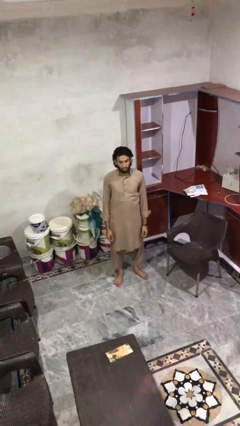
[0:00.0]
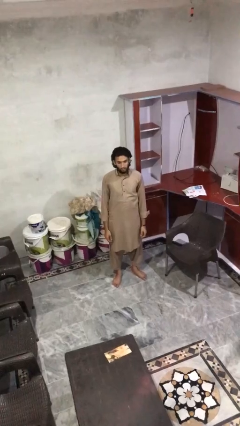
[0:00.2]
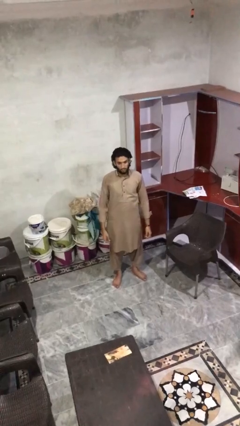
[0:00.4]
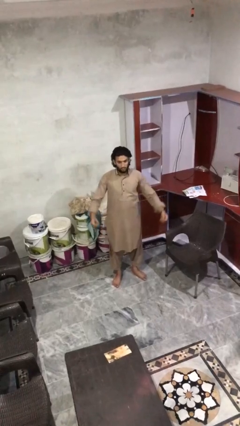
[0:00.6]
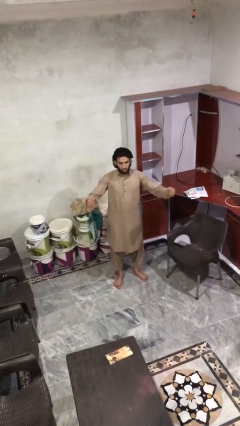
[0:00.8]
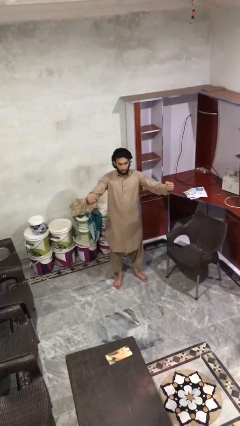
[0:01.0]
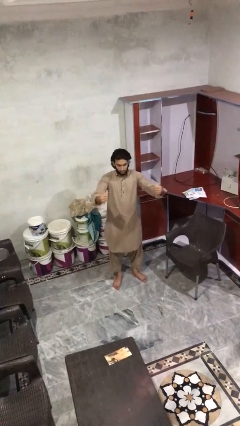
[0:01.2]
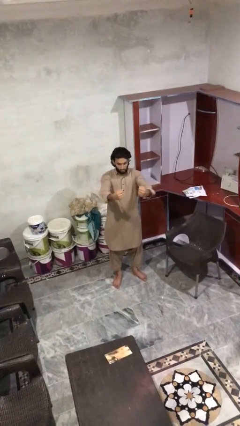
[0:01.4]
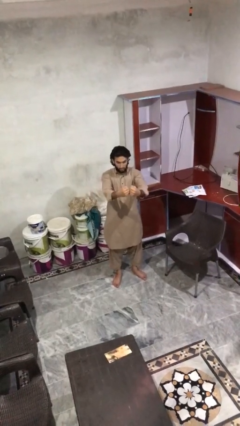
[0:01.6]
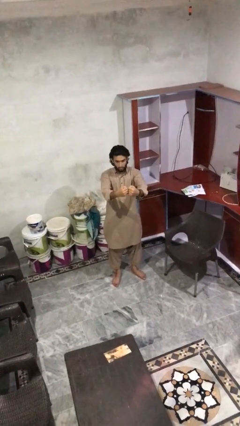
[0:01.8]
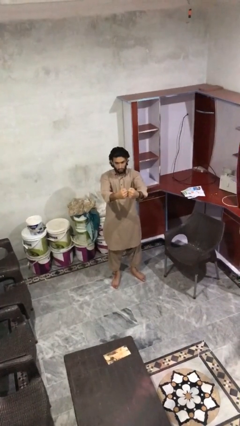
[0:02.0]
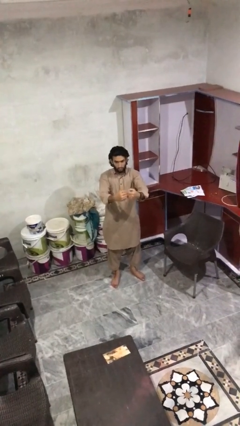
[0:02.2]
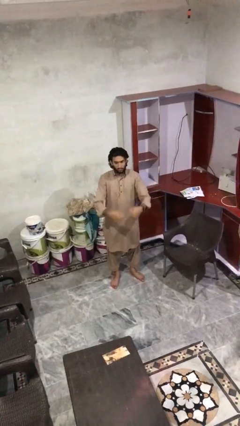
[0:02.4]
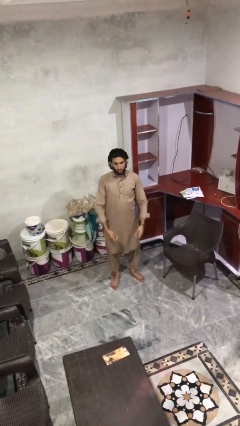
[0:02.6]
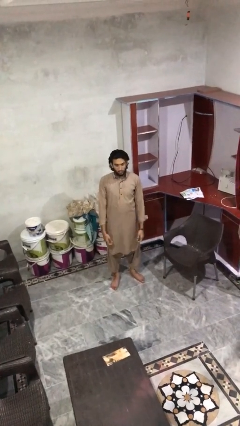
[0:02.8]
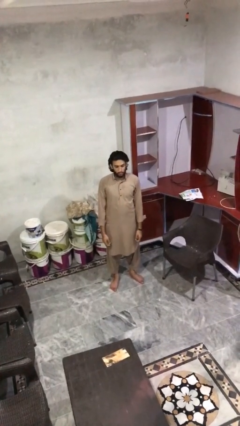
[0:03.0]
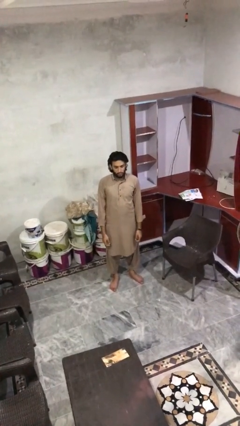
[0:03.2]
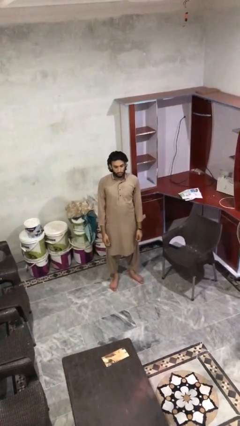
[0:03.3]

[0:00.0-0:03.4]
person gestures zoom out

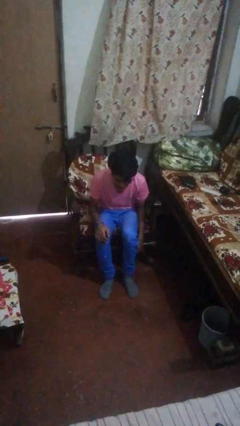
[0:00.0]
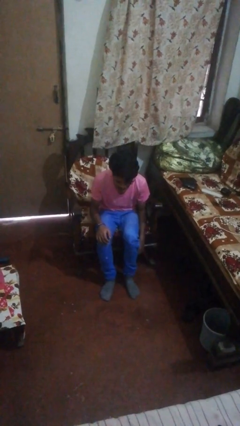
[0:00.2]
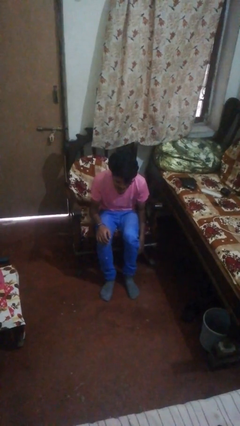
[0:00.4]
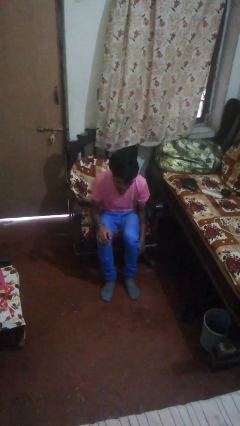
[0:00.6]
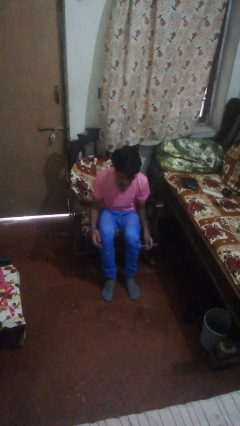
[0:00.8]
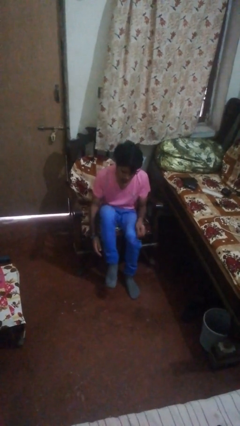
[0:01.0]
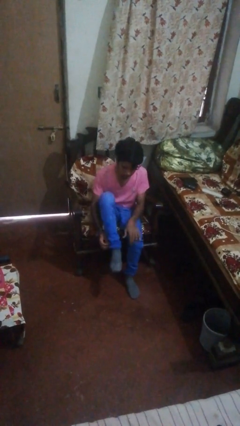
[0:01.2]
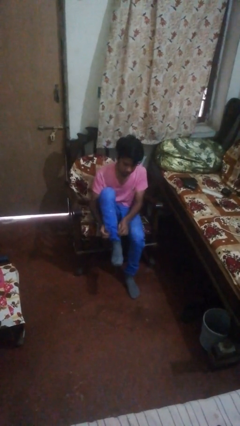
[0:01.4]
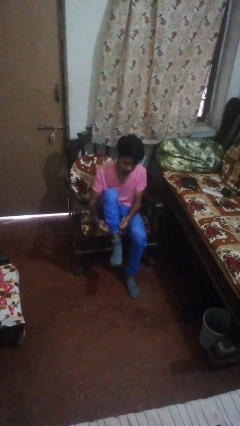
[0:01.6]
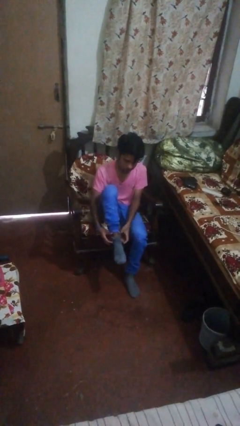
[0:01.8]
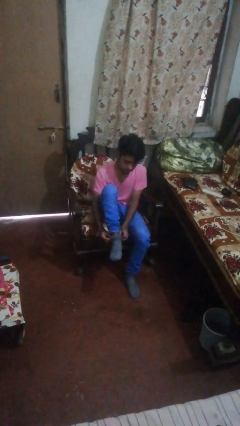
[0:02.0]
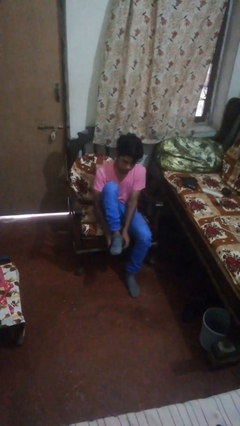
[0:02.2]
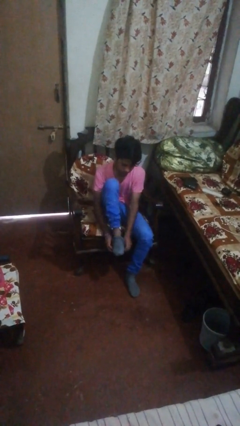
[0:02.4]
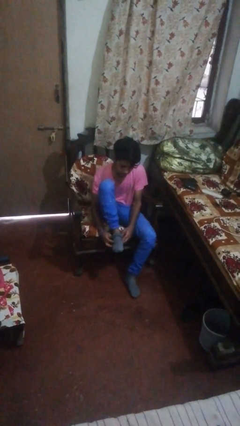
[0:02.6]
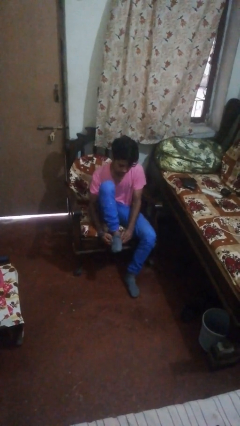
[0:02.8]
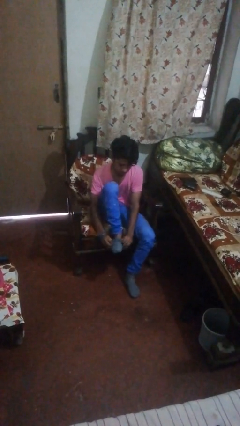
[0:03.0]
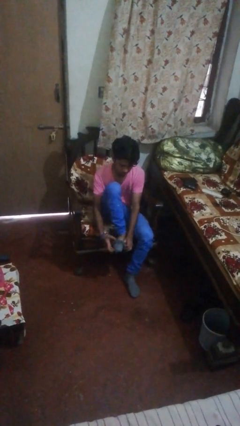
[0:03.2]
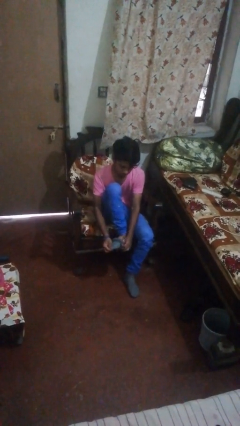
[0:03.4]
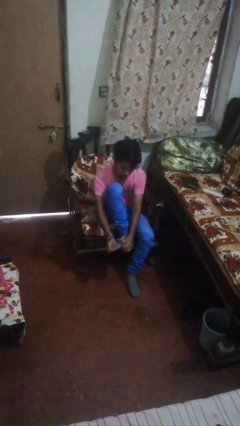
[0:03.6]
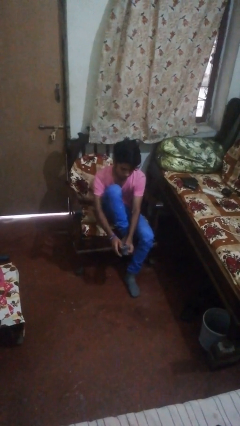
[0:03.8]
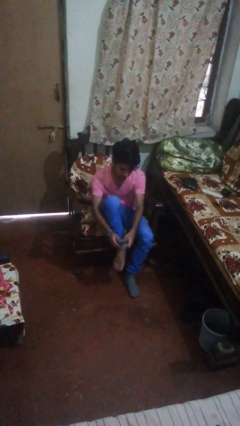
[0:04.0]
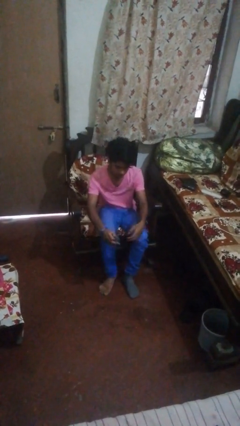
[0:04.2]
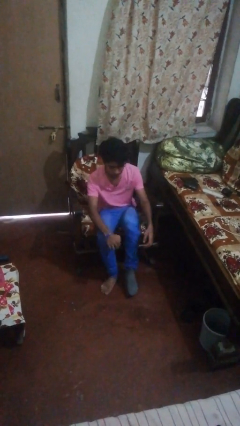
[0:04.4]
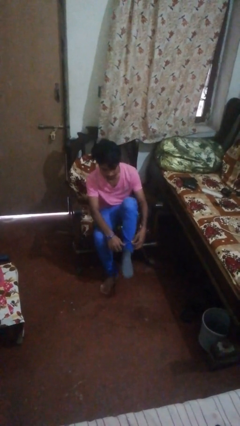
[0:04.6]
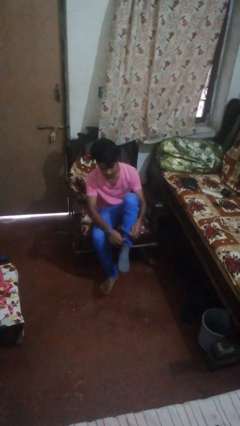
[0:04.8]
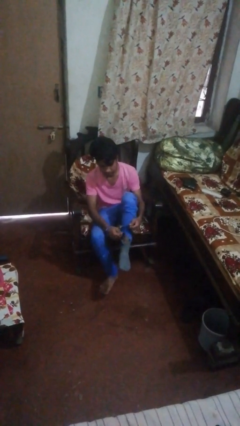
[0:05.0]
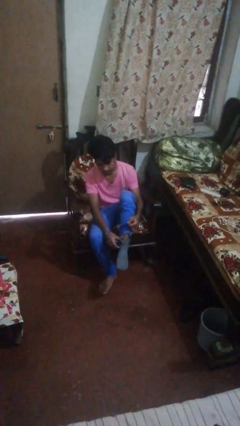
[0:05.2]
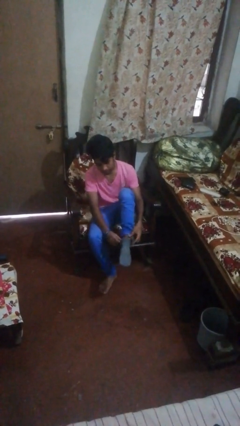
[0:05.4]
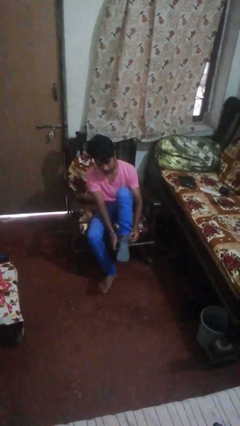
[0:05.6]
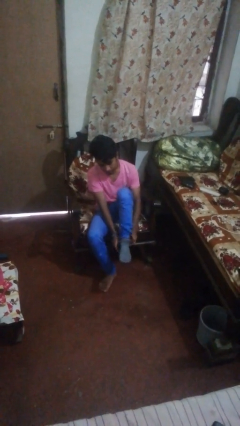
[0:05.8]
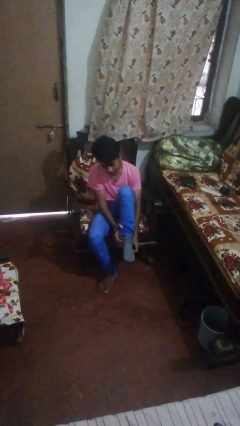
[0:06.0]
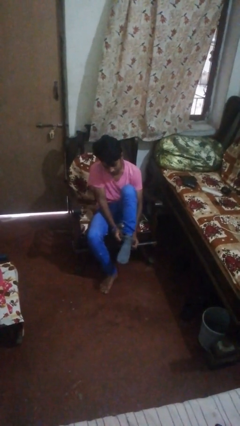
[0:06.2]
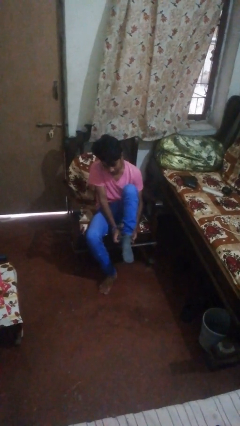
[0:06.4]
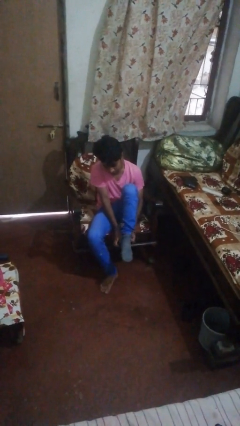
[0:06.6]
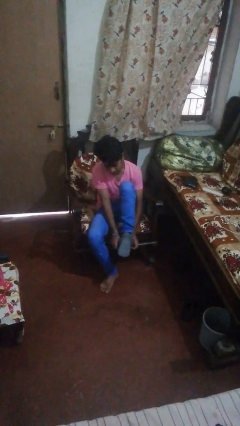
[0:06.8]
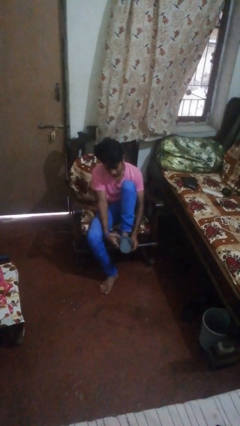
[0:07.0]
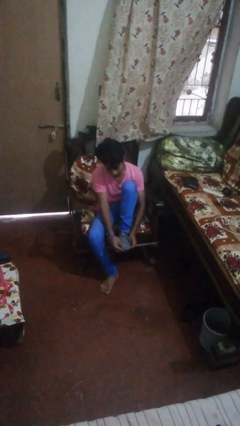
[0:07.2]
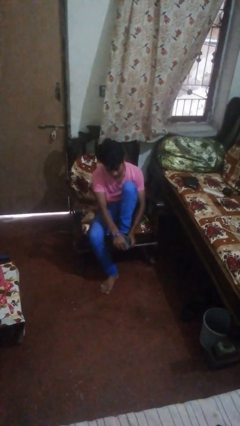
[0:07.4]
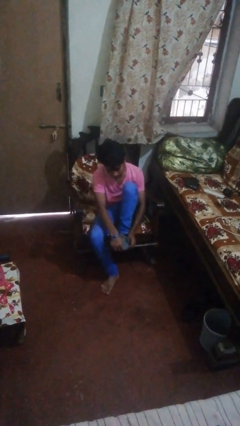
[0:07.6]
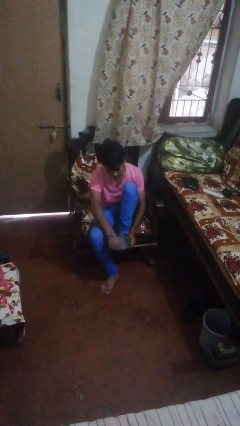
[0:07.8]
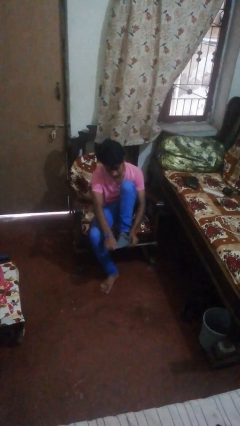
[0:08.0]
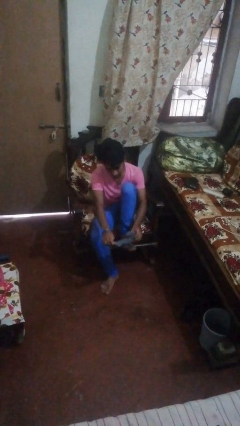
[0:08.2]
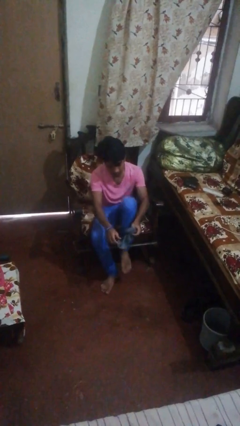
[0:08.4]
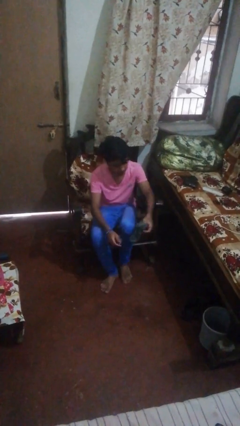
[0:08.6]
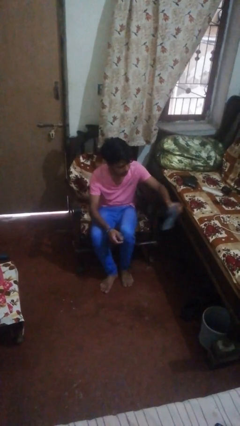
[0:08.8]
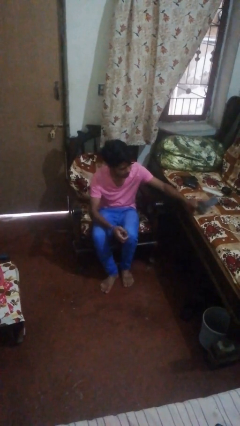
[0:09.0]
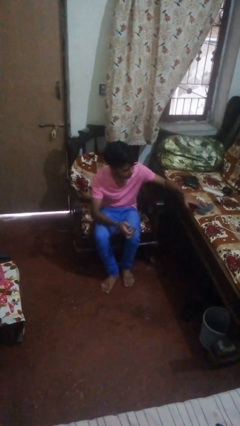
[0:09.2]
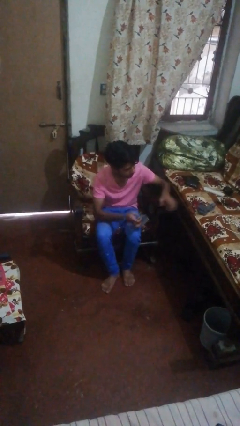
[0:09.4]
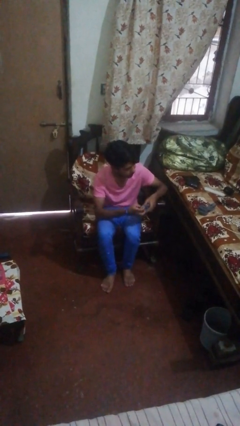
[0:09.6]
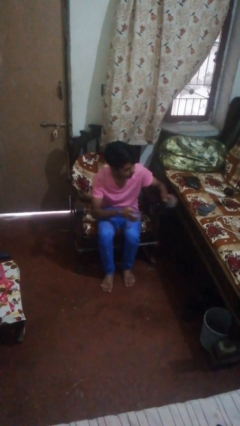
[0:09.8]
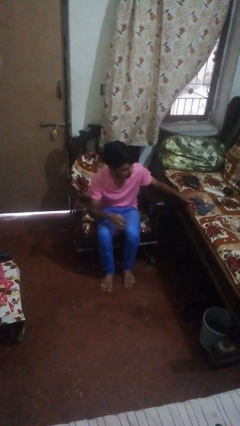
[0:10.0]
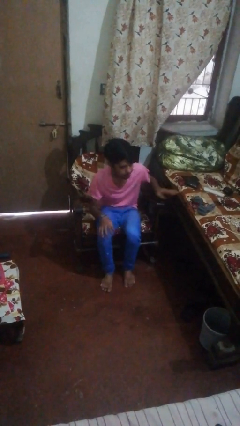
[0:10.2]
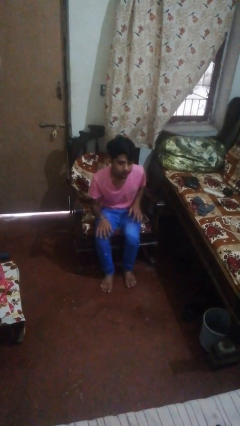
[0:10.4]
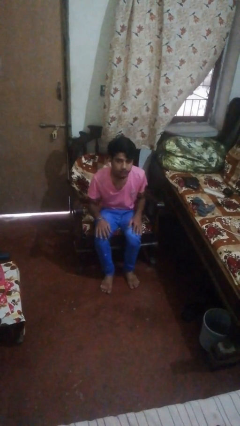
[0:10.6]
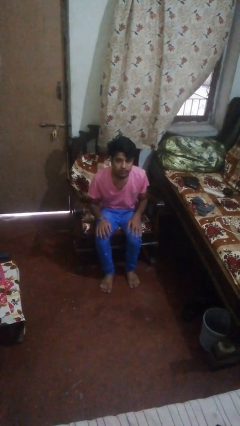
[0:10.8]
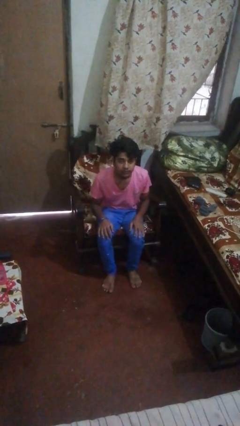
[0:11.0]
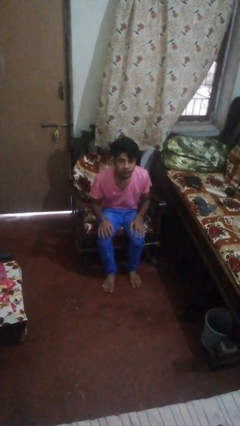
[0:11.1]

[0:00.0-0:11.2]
person takes off socks

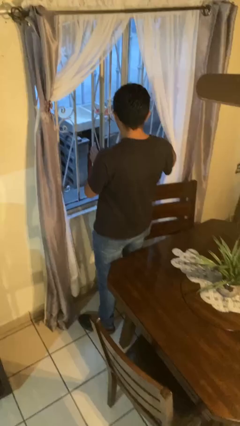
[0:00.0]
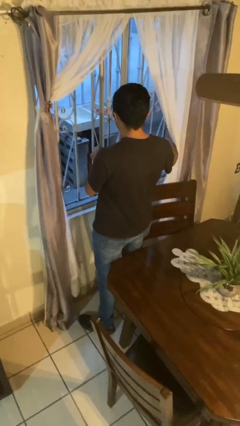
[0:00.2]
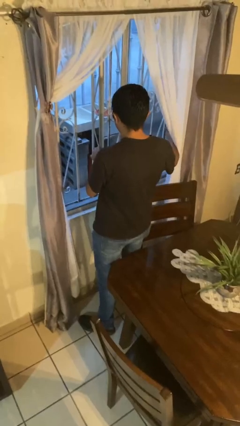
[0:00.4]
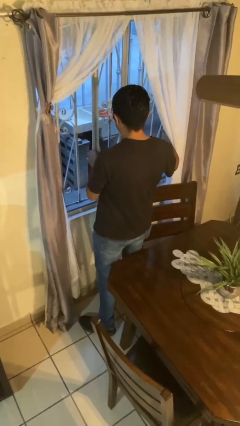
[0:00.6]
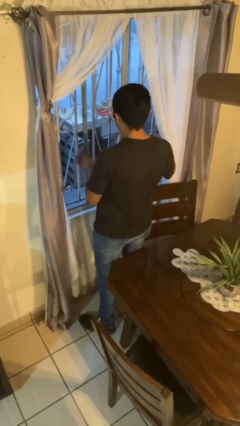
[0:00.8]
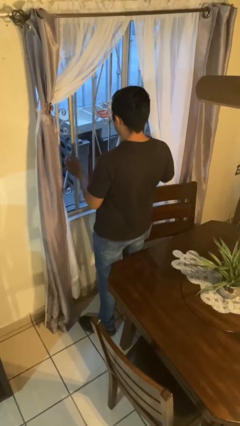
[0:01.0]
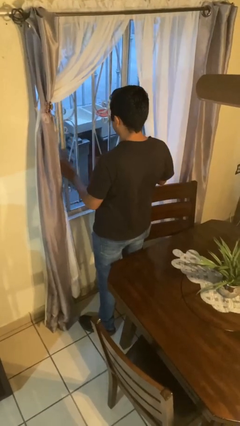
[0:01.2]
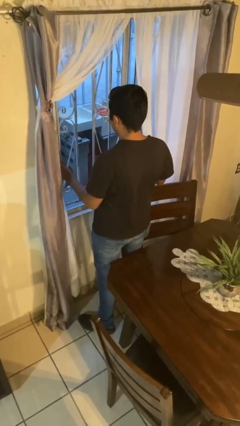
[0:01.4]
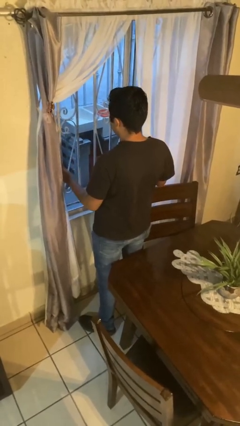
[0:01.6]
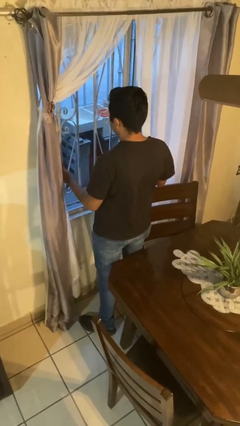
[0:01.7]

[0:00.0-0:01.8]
person closes home window

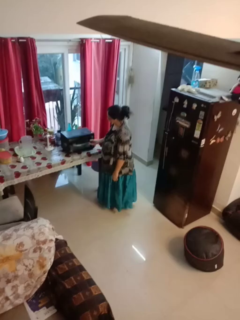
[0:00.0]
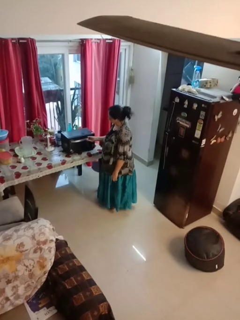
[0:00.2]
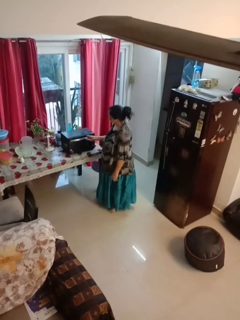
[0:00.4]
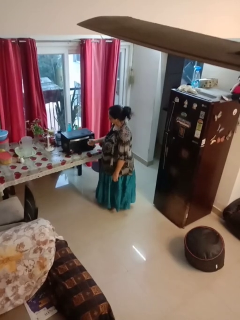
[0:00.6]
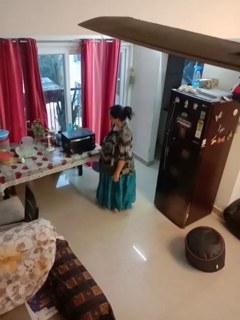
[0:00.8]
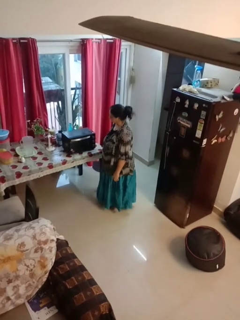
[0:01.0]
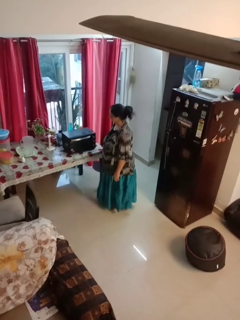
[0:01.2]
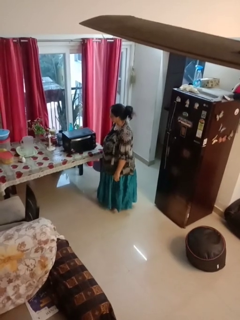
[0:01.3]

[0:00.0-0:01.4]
person closes microwave

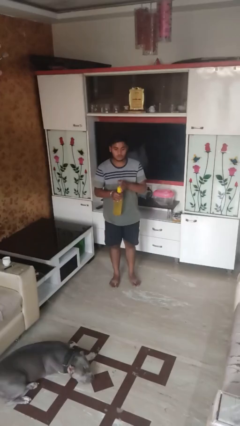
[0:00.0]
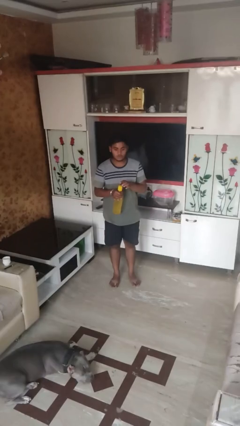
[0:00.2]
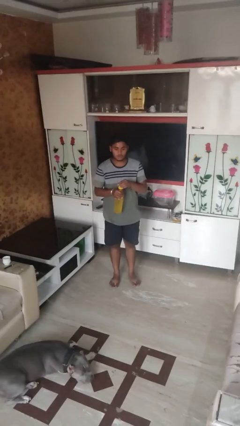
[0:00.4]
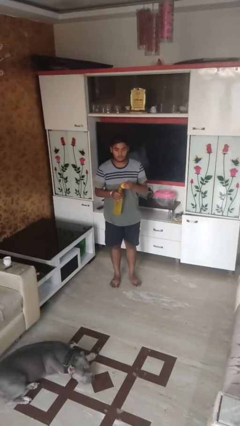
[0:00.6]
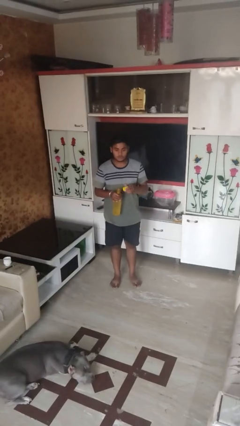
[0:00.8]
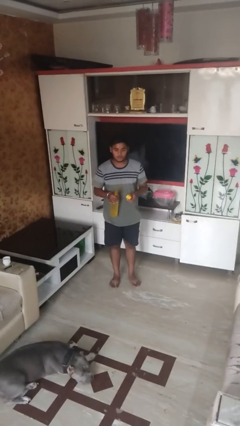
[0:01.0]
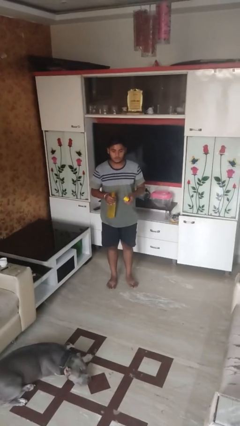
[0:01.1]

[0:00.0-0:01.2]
person unscrews lid from bottle
